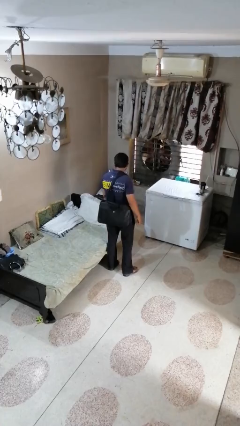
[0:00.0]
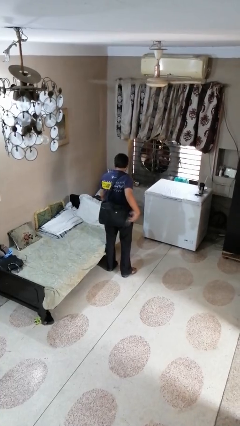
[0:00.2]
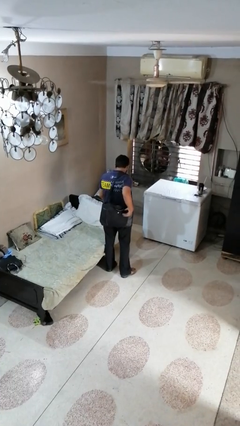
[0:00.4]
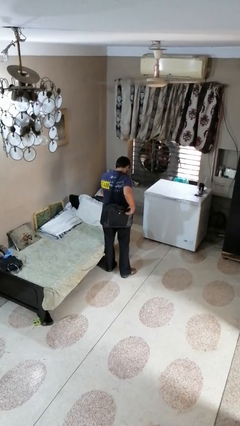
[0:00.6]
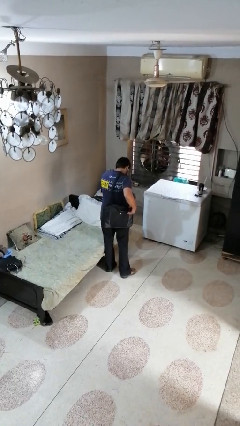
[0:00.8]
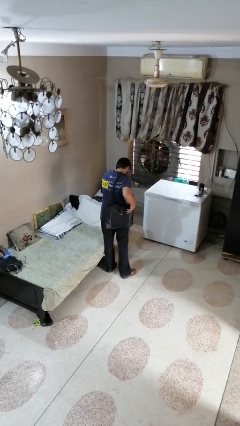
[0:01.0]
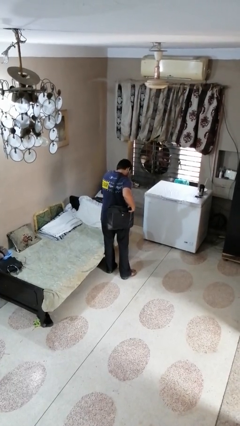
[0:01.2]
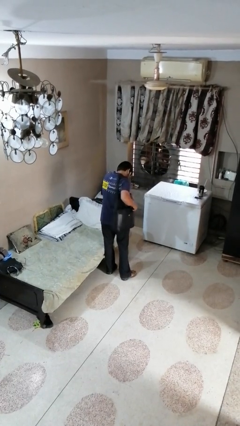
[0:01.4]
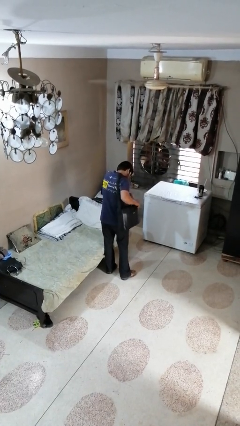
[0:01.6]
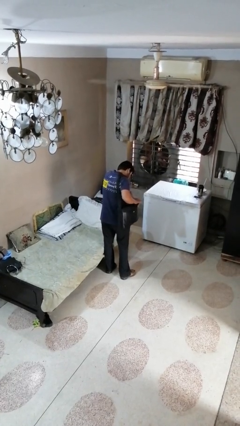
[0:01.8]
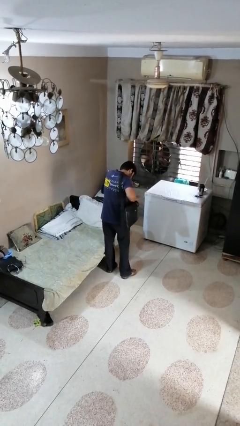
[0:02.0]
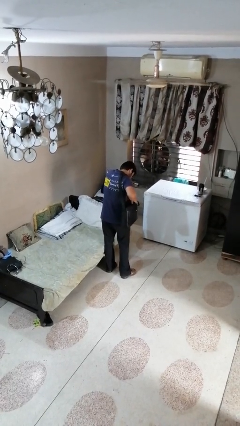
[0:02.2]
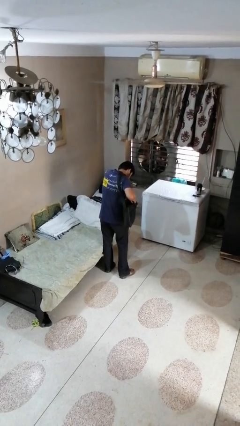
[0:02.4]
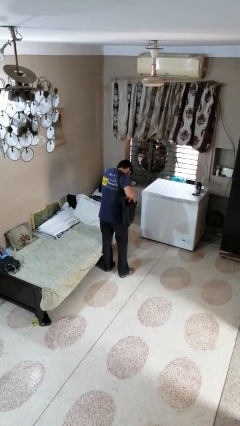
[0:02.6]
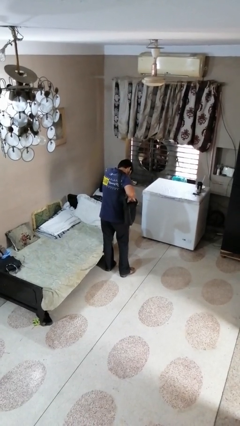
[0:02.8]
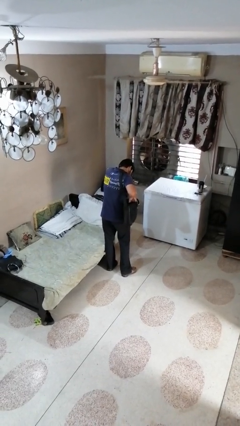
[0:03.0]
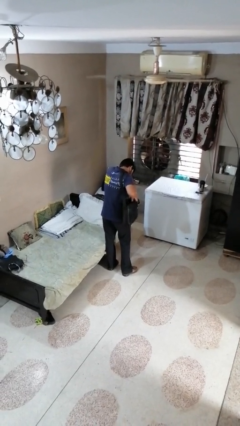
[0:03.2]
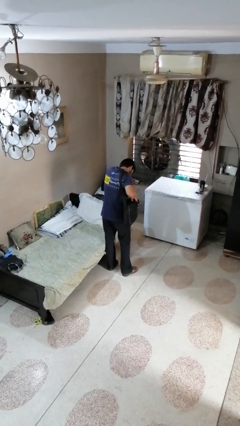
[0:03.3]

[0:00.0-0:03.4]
person searches in backpack

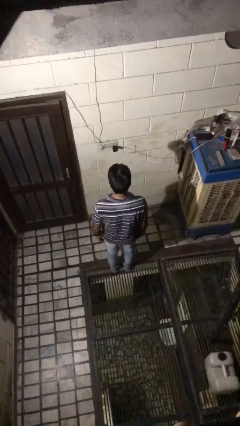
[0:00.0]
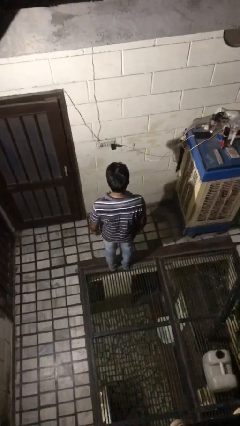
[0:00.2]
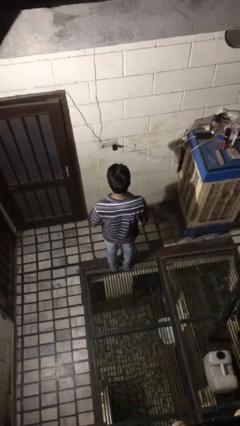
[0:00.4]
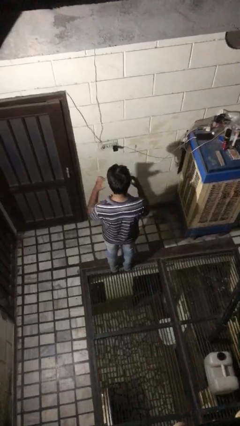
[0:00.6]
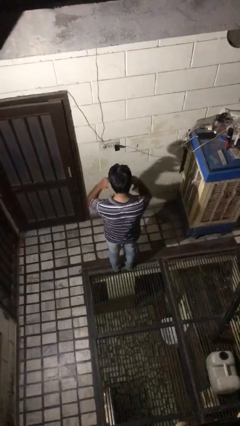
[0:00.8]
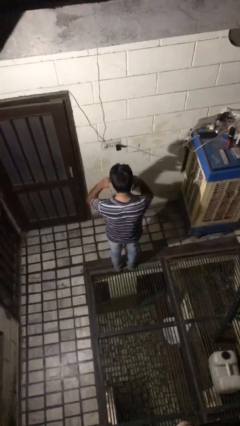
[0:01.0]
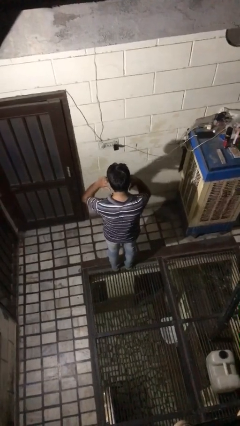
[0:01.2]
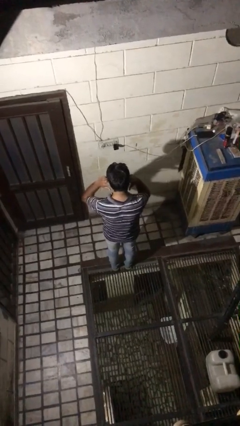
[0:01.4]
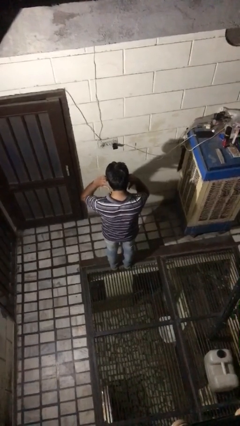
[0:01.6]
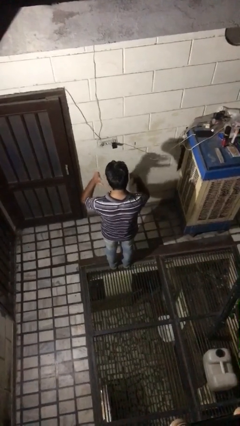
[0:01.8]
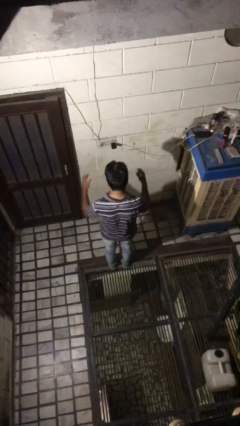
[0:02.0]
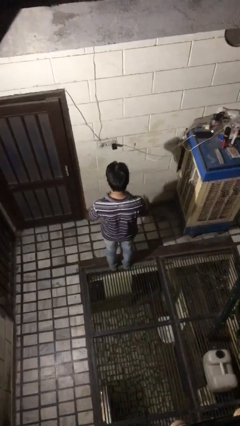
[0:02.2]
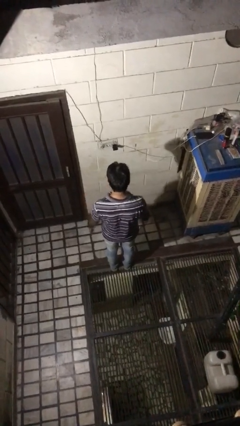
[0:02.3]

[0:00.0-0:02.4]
person puts fingers in ear

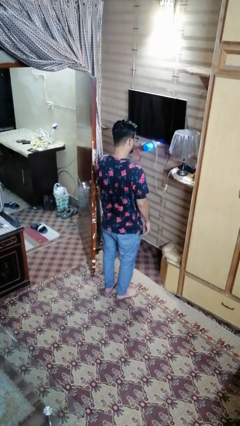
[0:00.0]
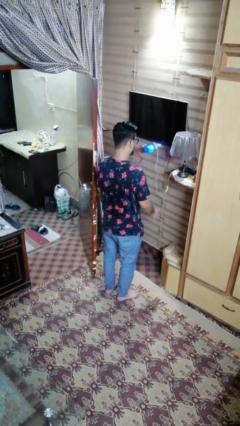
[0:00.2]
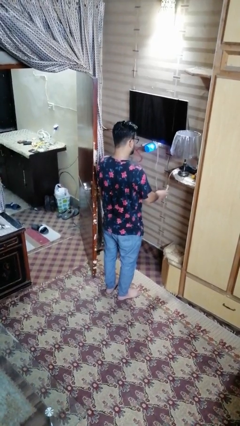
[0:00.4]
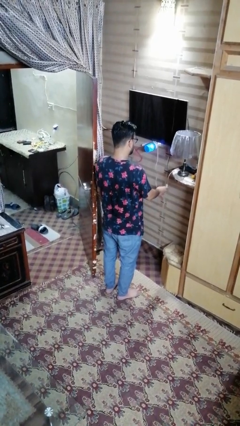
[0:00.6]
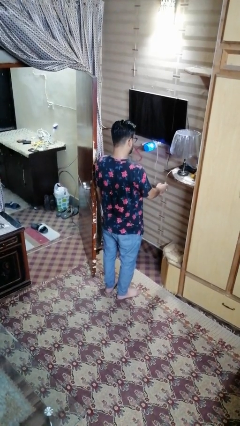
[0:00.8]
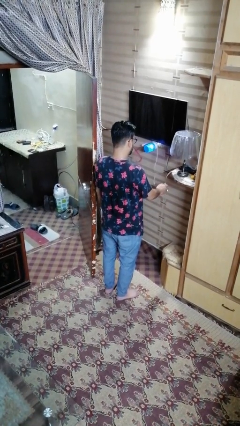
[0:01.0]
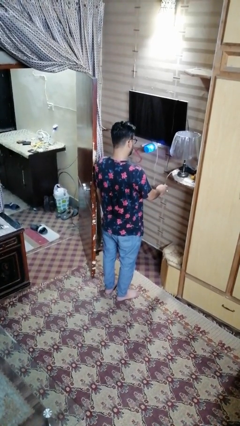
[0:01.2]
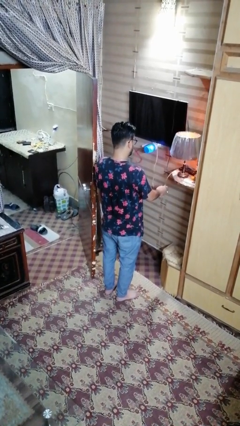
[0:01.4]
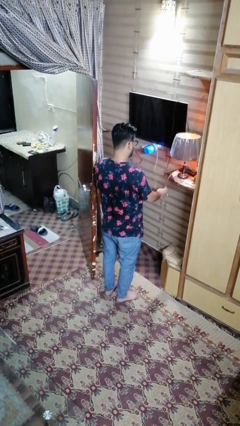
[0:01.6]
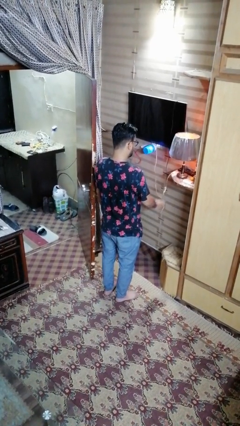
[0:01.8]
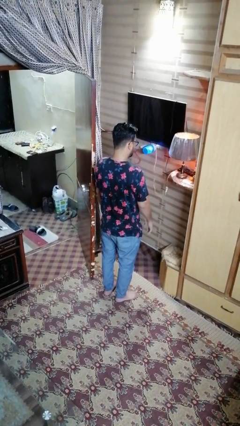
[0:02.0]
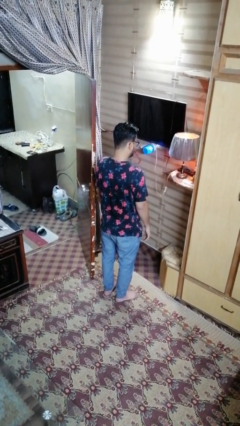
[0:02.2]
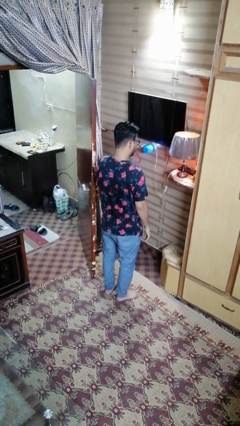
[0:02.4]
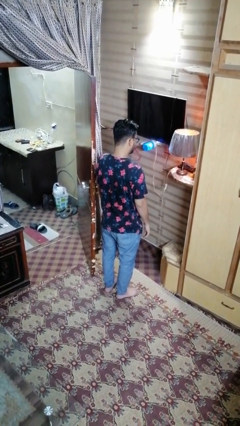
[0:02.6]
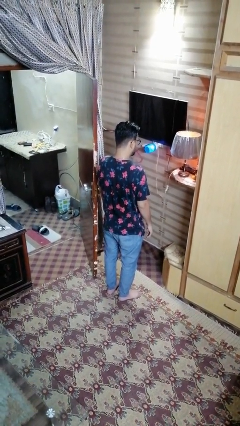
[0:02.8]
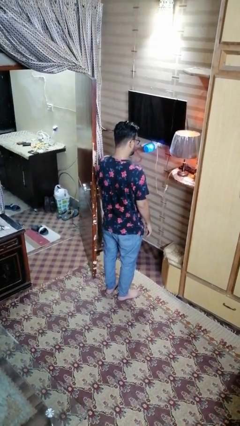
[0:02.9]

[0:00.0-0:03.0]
person turns on lamp

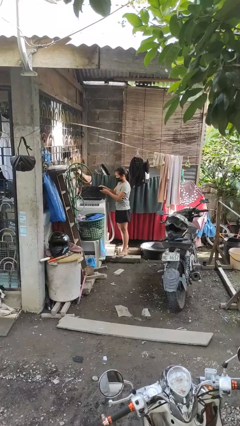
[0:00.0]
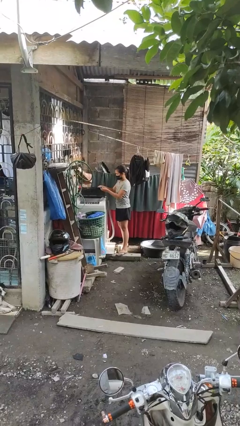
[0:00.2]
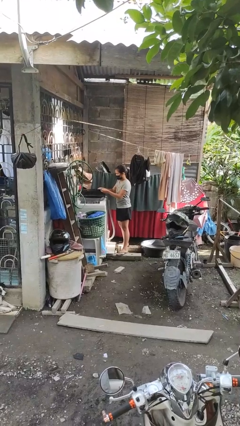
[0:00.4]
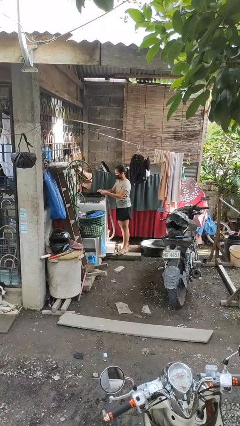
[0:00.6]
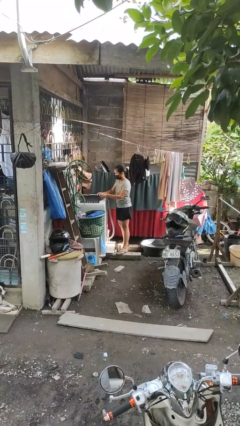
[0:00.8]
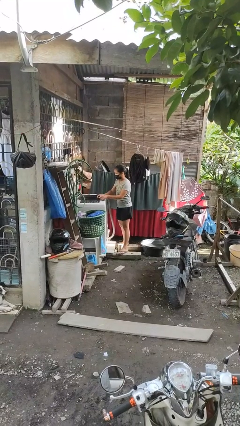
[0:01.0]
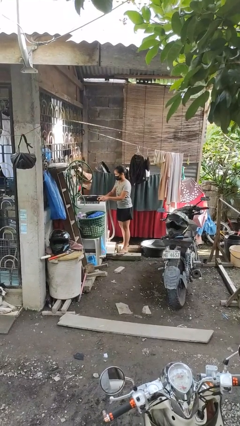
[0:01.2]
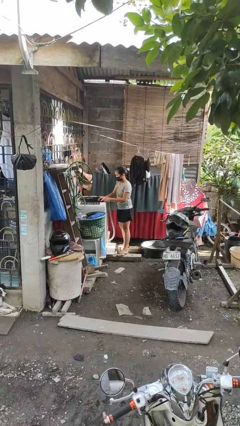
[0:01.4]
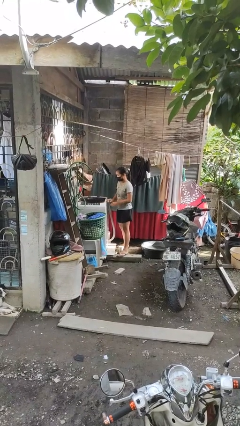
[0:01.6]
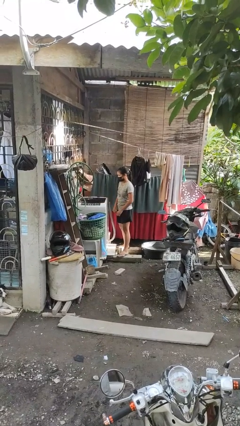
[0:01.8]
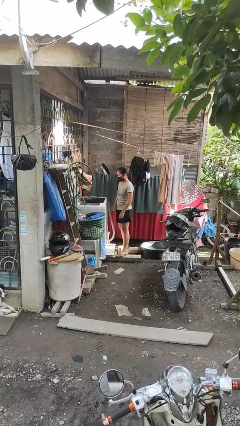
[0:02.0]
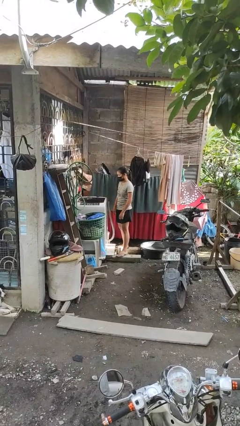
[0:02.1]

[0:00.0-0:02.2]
person closes clothes washer

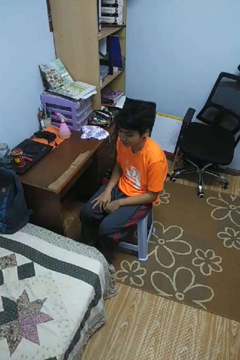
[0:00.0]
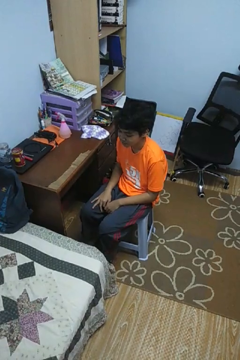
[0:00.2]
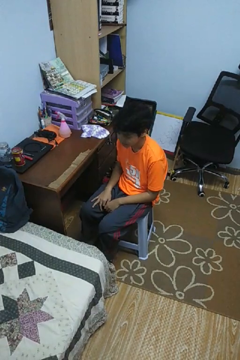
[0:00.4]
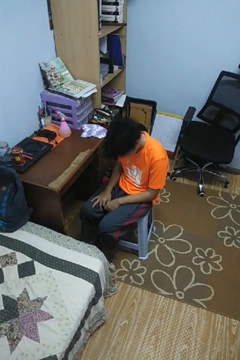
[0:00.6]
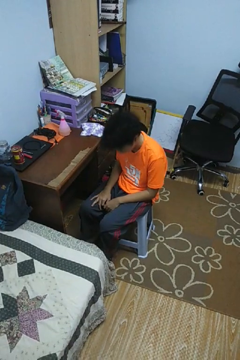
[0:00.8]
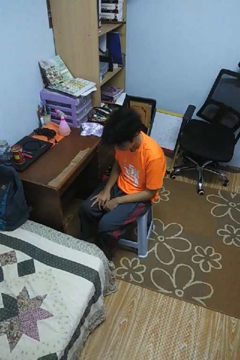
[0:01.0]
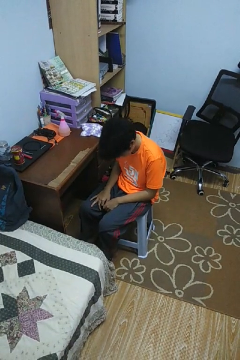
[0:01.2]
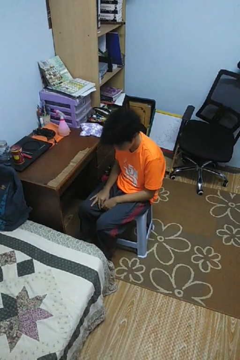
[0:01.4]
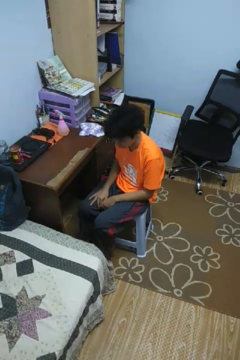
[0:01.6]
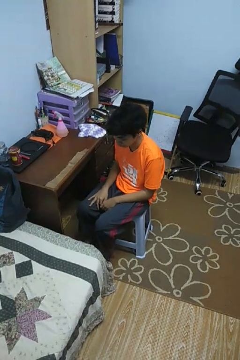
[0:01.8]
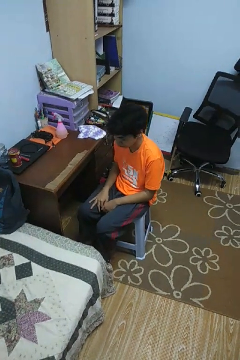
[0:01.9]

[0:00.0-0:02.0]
person nods head

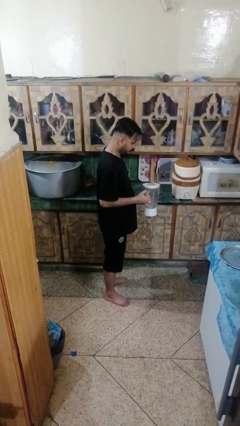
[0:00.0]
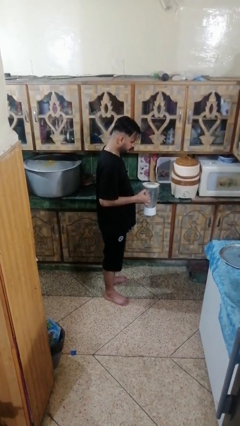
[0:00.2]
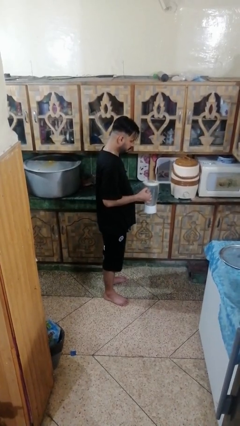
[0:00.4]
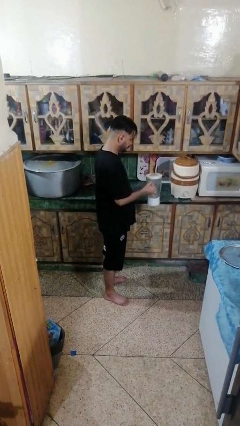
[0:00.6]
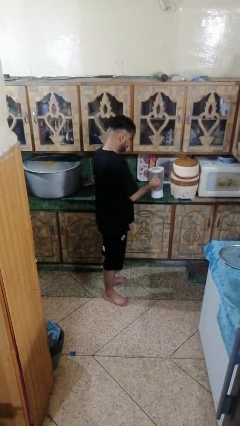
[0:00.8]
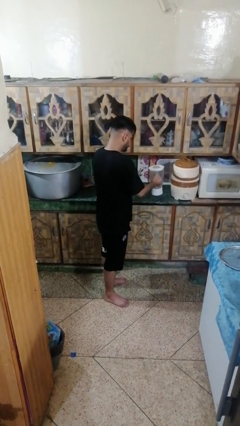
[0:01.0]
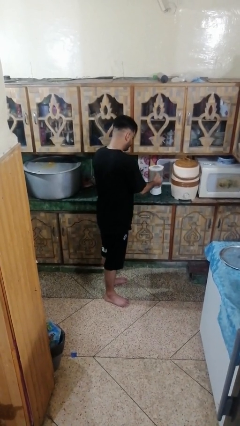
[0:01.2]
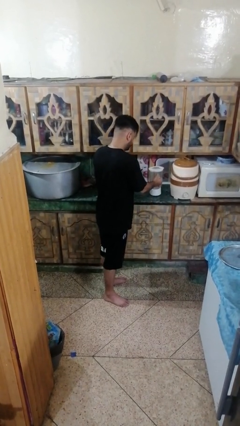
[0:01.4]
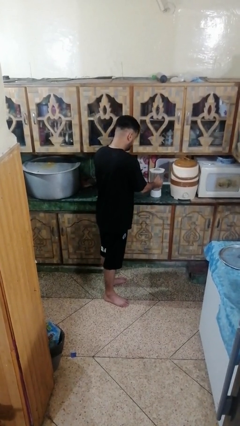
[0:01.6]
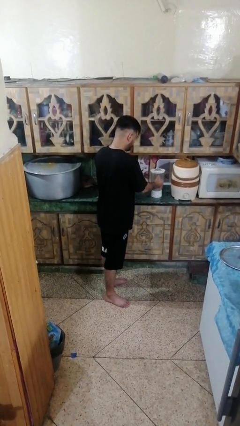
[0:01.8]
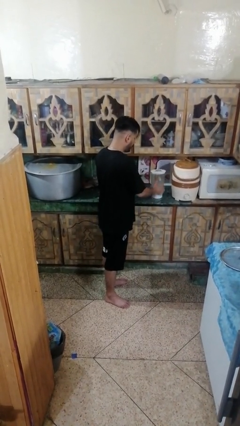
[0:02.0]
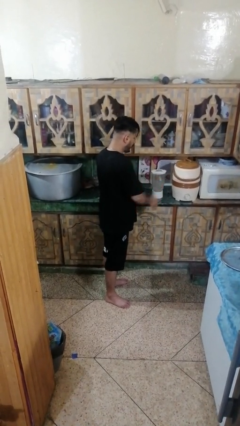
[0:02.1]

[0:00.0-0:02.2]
person puts down object on countertop

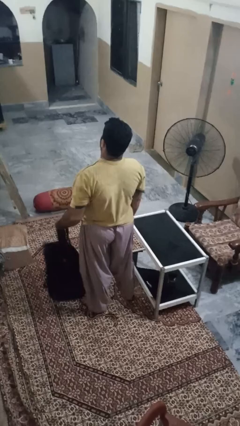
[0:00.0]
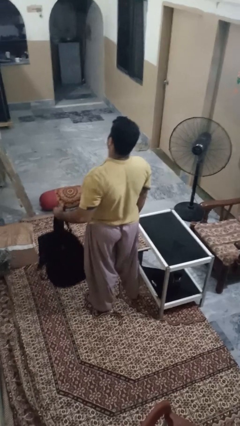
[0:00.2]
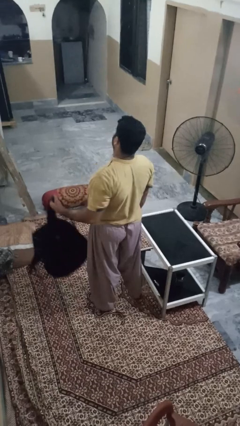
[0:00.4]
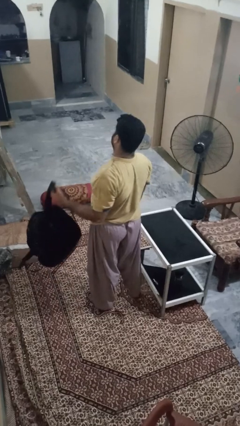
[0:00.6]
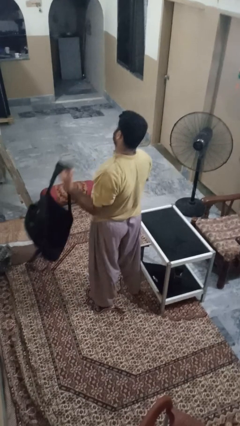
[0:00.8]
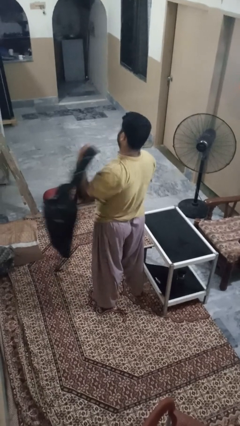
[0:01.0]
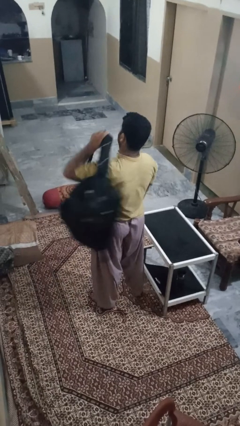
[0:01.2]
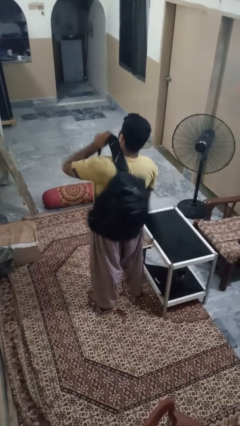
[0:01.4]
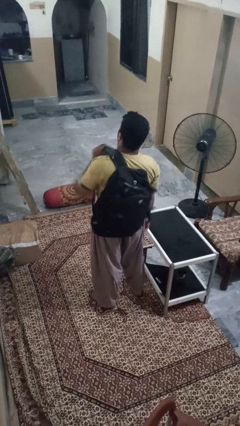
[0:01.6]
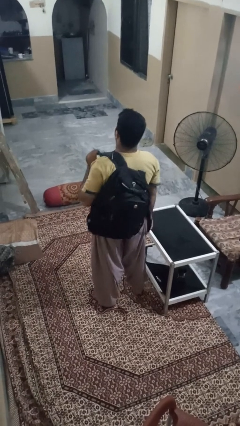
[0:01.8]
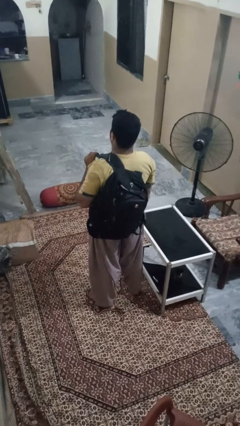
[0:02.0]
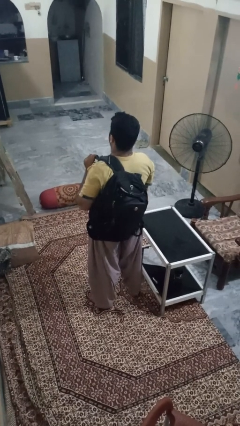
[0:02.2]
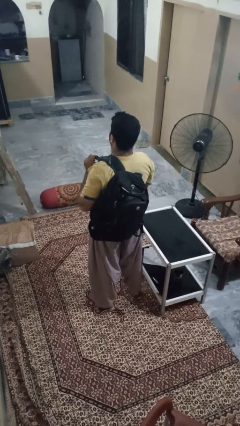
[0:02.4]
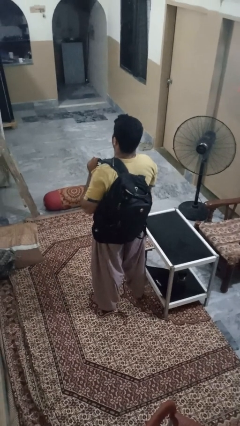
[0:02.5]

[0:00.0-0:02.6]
person puts on backpack
